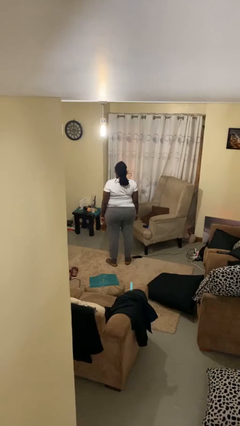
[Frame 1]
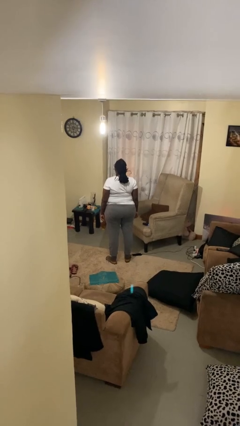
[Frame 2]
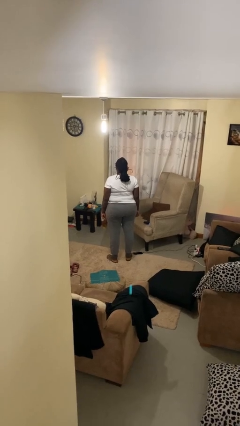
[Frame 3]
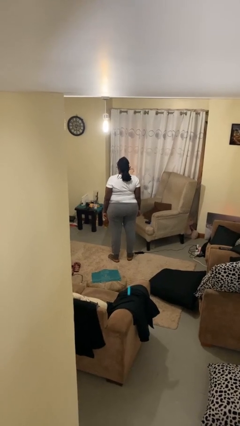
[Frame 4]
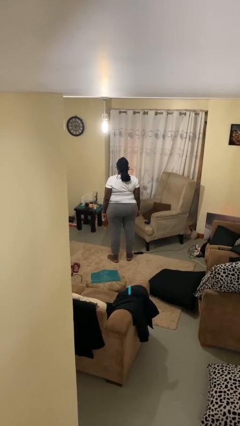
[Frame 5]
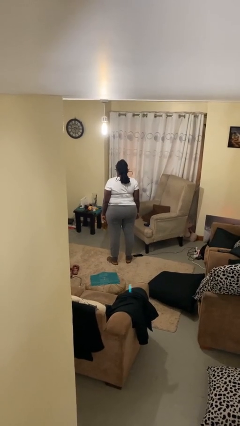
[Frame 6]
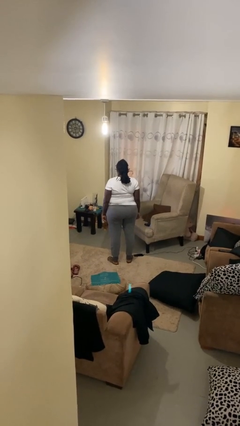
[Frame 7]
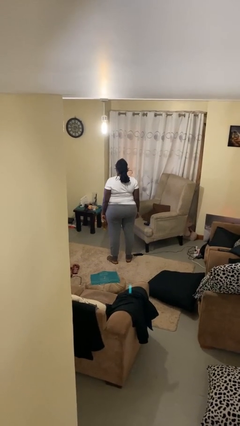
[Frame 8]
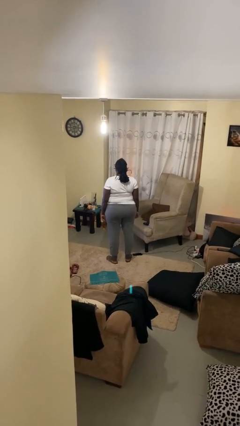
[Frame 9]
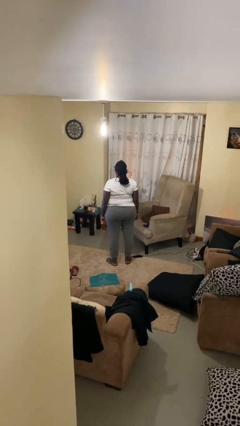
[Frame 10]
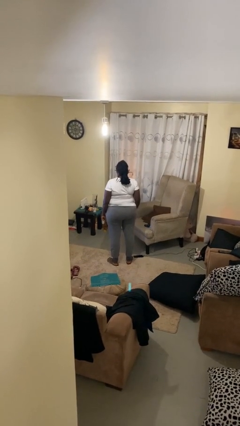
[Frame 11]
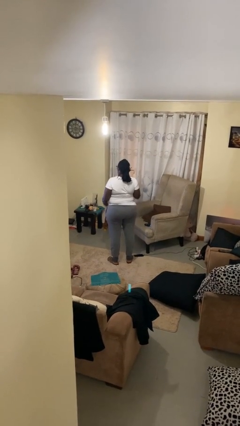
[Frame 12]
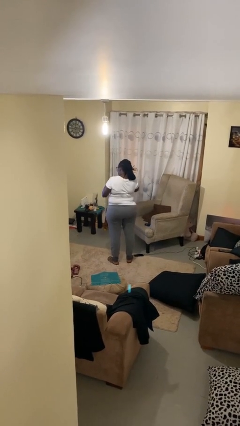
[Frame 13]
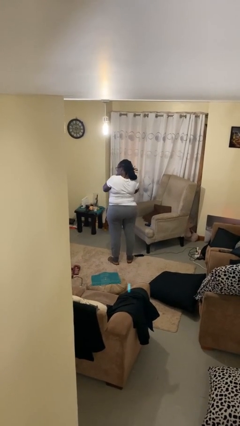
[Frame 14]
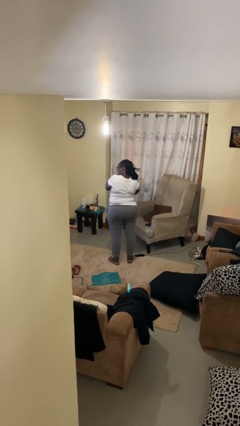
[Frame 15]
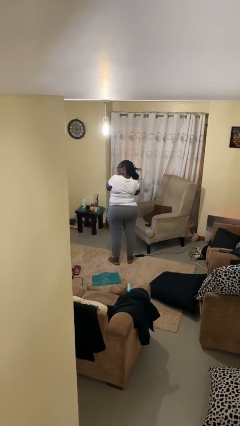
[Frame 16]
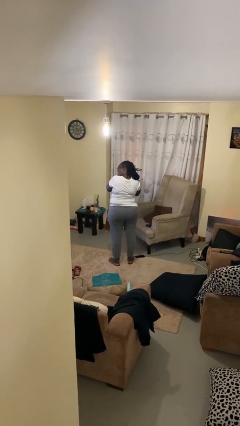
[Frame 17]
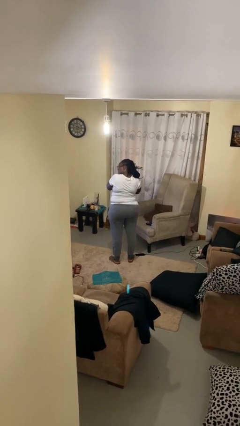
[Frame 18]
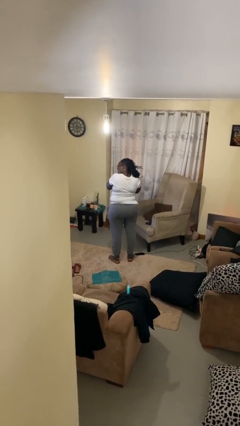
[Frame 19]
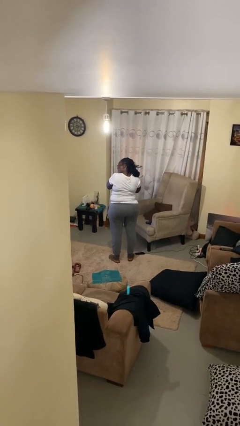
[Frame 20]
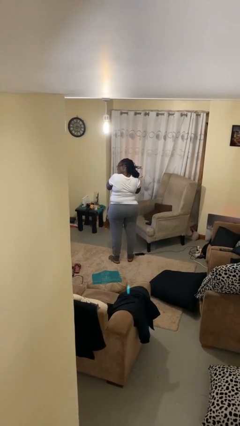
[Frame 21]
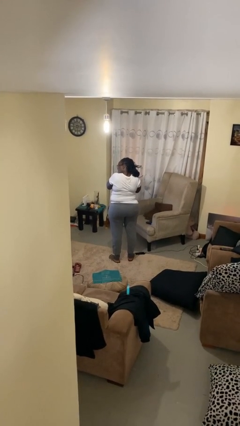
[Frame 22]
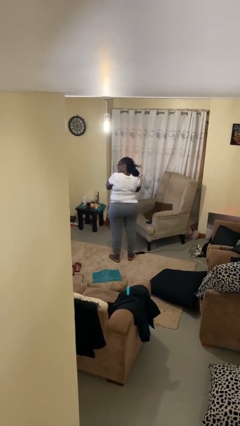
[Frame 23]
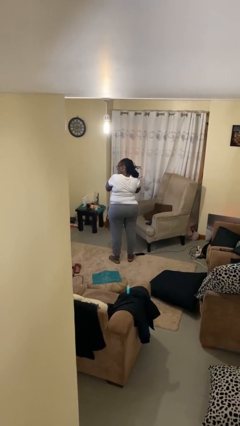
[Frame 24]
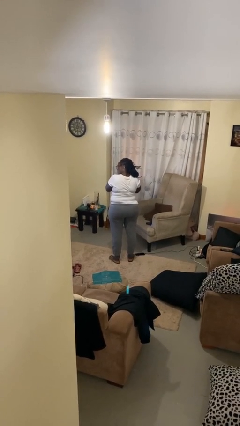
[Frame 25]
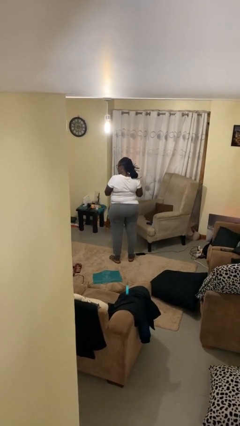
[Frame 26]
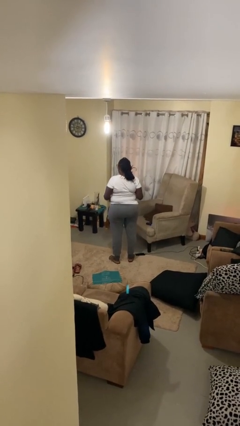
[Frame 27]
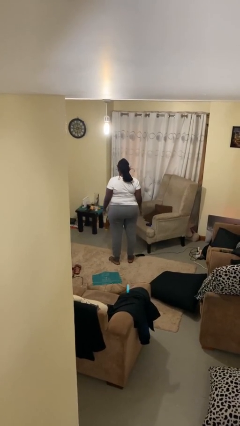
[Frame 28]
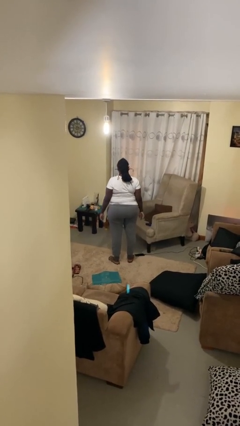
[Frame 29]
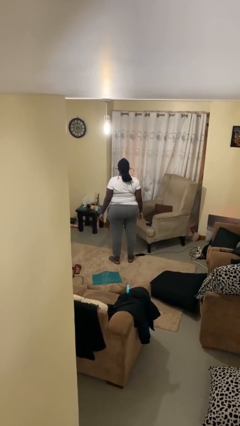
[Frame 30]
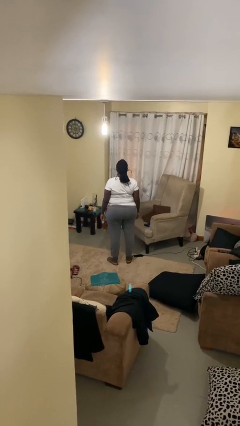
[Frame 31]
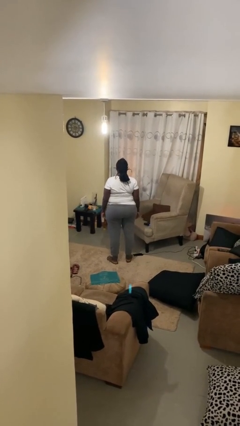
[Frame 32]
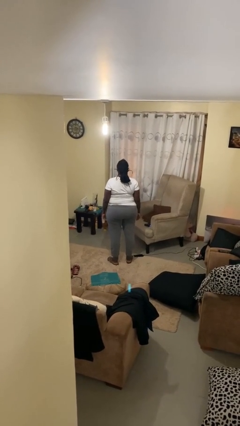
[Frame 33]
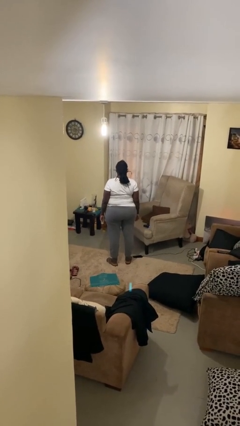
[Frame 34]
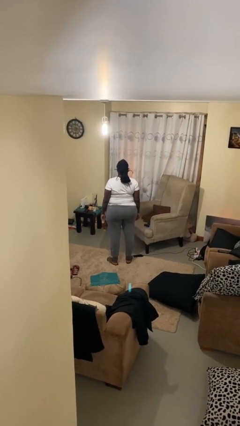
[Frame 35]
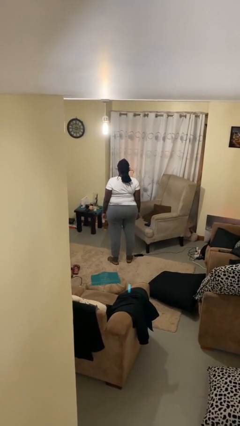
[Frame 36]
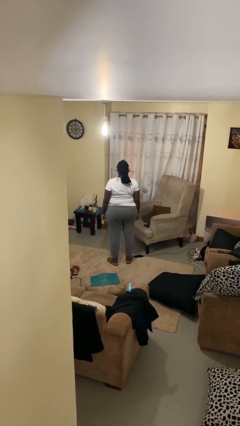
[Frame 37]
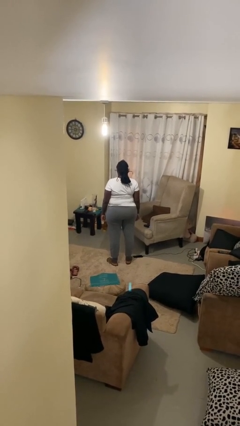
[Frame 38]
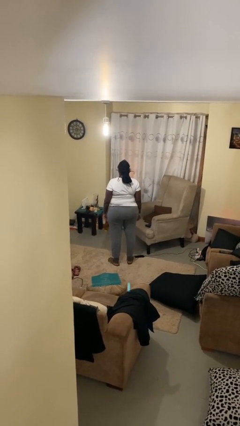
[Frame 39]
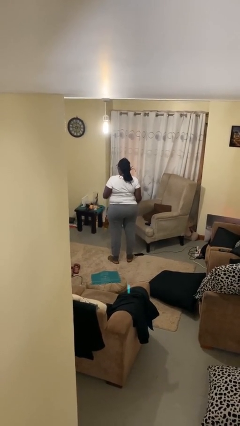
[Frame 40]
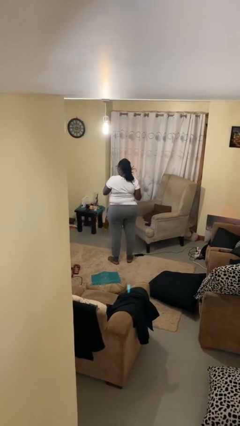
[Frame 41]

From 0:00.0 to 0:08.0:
person puts on earrings

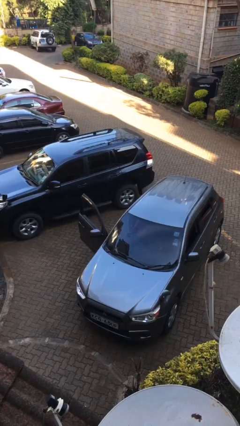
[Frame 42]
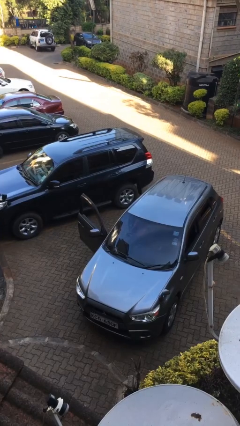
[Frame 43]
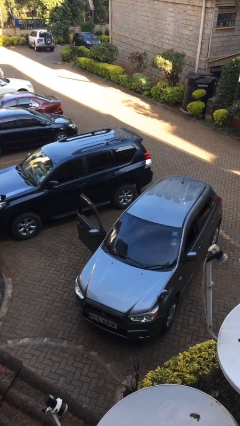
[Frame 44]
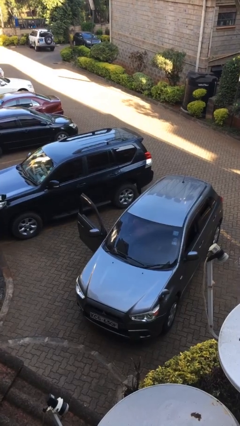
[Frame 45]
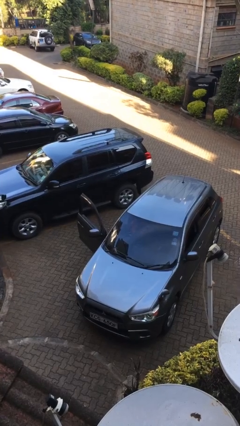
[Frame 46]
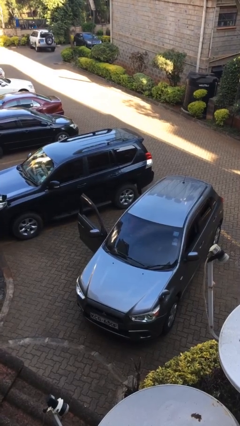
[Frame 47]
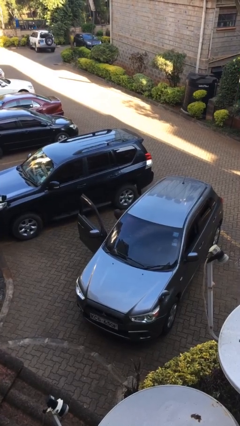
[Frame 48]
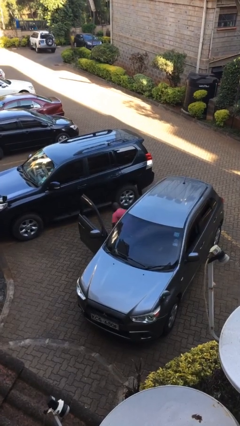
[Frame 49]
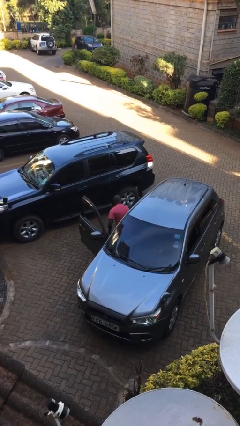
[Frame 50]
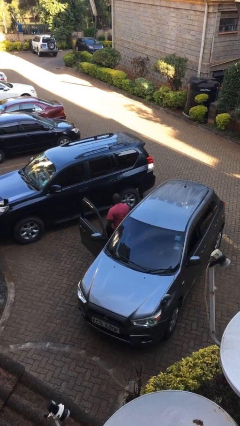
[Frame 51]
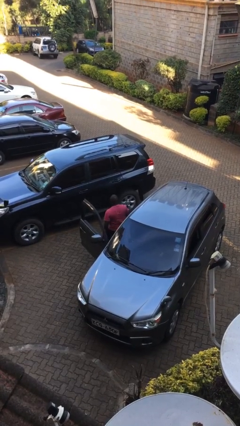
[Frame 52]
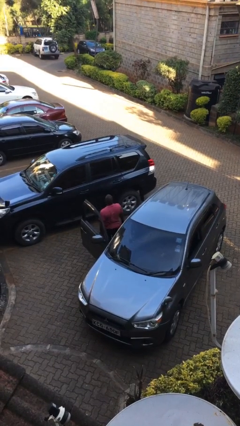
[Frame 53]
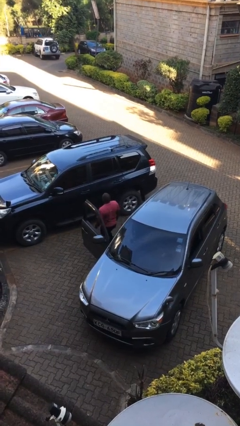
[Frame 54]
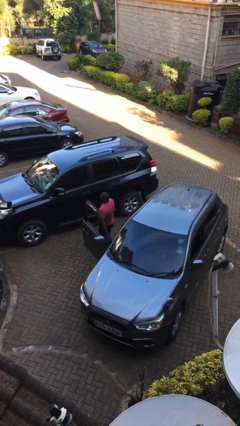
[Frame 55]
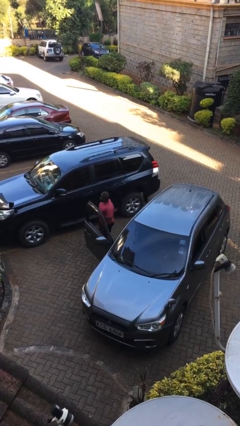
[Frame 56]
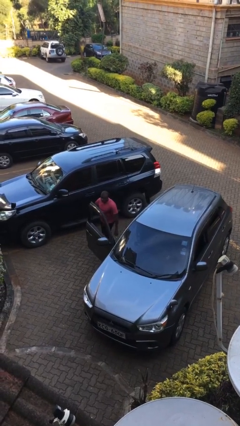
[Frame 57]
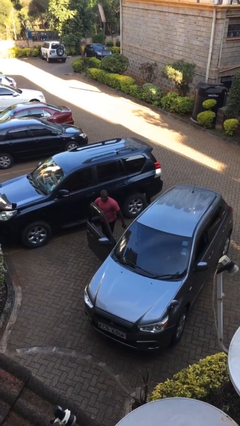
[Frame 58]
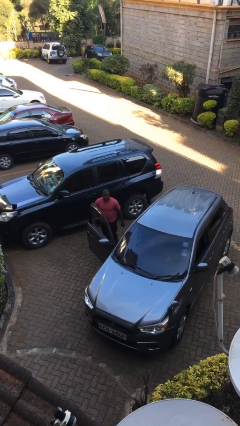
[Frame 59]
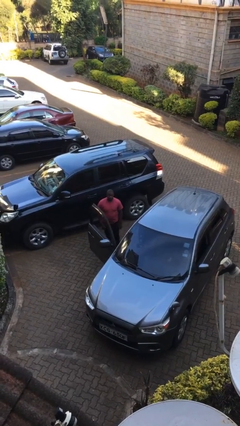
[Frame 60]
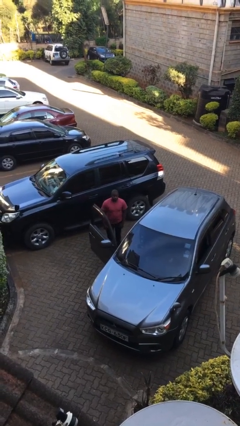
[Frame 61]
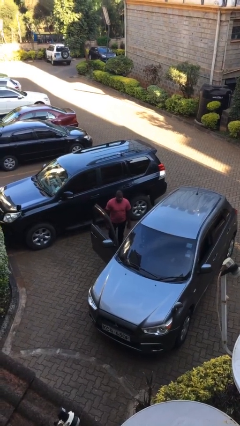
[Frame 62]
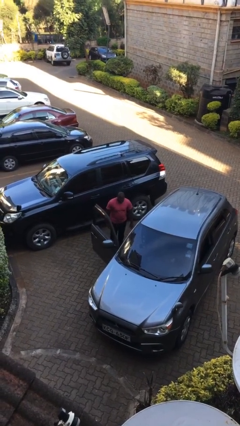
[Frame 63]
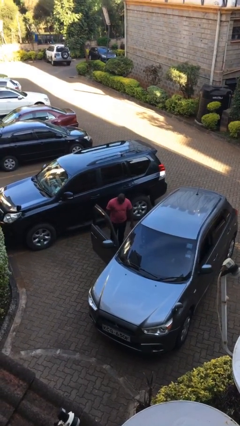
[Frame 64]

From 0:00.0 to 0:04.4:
person exits car

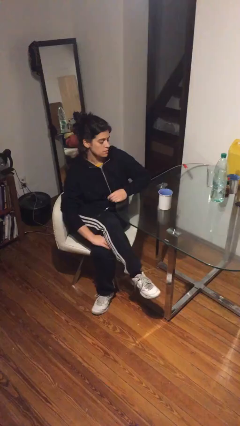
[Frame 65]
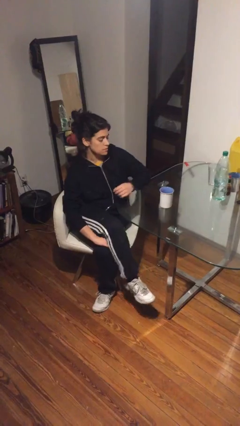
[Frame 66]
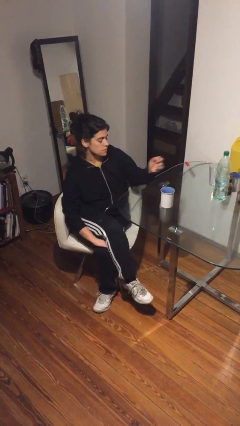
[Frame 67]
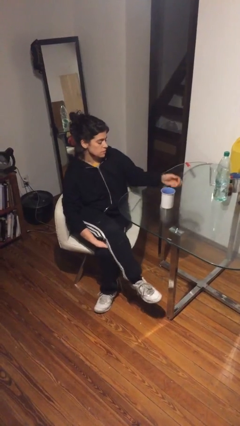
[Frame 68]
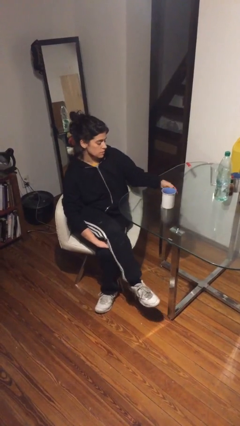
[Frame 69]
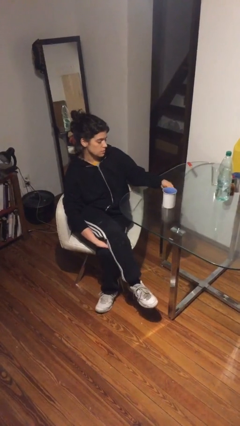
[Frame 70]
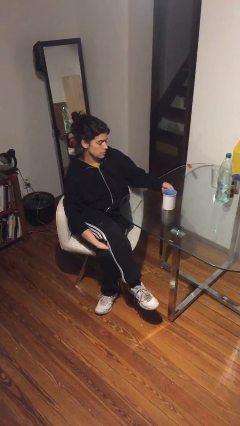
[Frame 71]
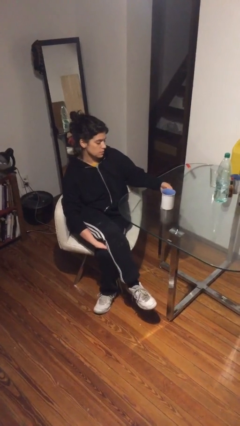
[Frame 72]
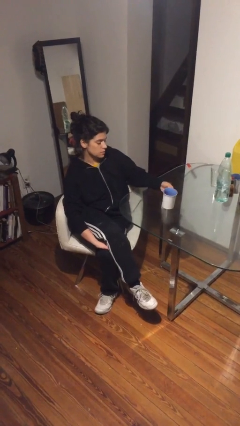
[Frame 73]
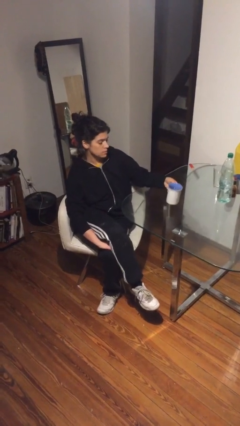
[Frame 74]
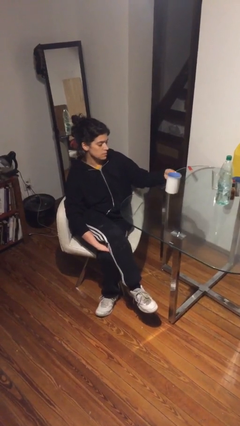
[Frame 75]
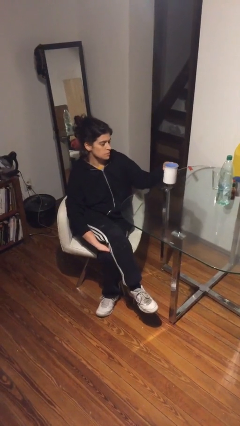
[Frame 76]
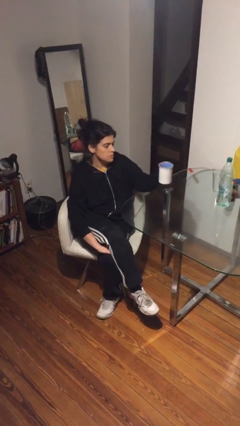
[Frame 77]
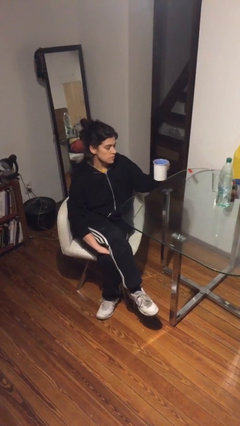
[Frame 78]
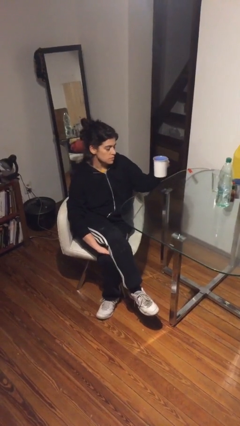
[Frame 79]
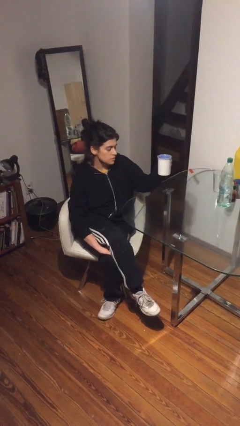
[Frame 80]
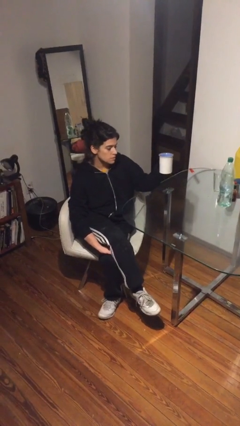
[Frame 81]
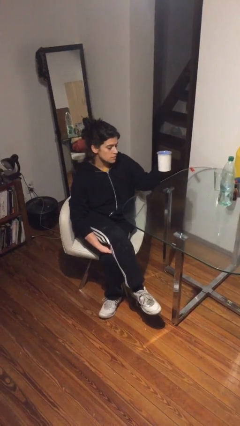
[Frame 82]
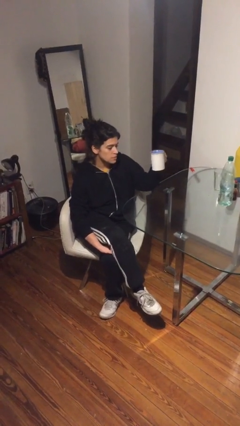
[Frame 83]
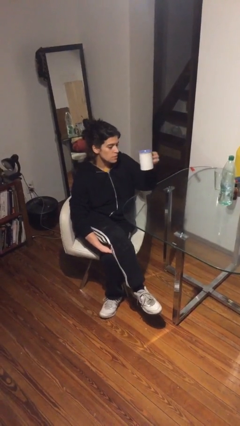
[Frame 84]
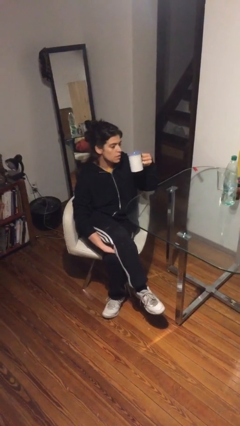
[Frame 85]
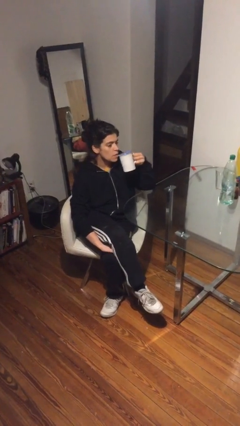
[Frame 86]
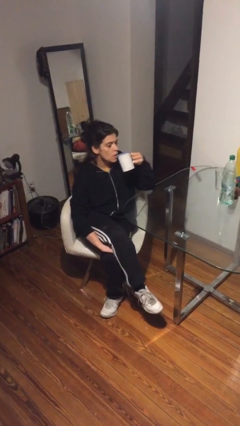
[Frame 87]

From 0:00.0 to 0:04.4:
person picks up object from table

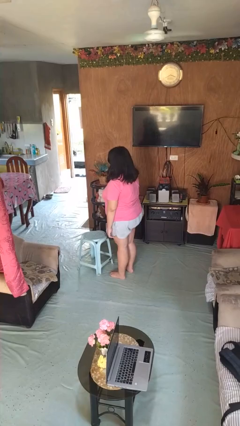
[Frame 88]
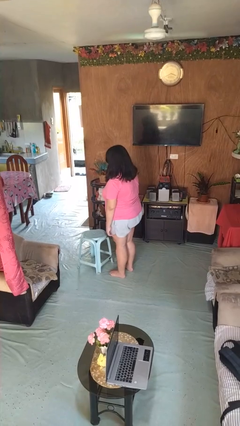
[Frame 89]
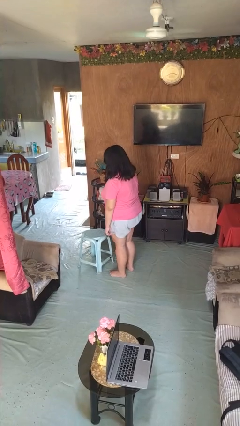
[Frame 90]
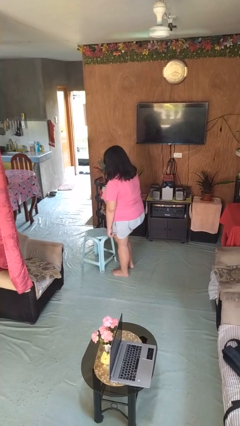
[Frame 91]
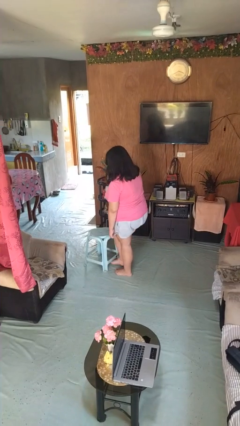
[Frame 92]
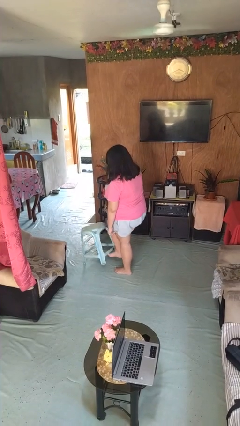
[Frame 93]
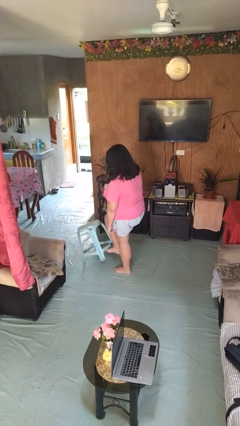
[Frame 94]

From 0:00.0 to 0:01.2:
person knocks over furniture
